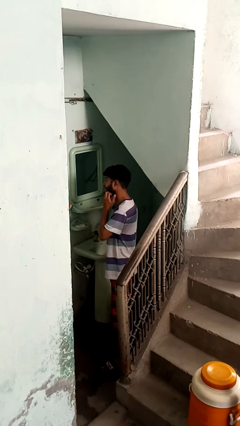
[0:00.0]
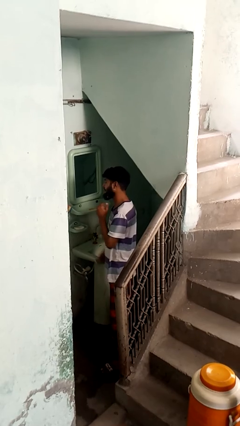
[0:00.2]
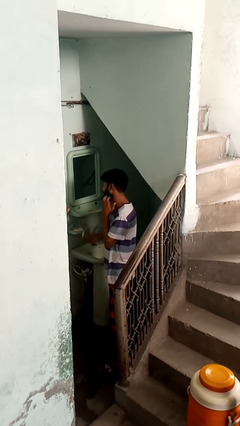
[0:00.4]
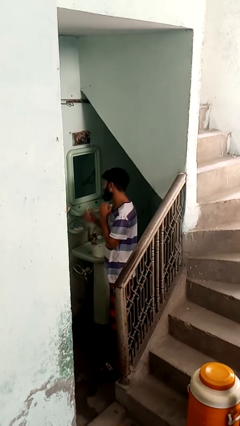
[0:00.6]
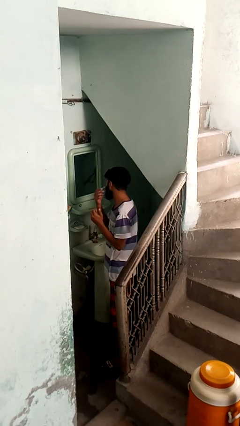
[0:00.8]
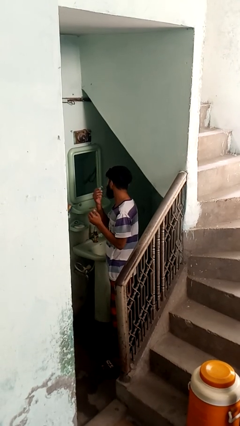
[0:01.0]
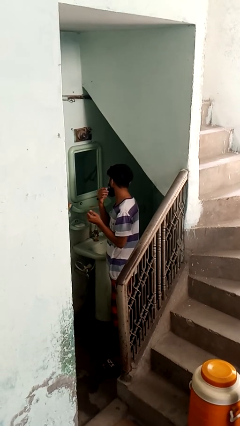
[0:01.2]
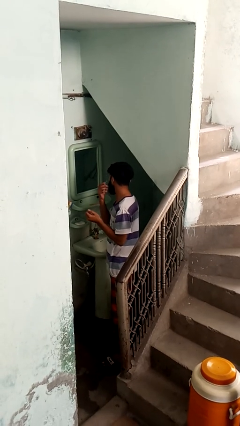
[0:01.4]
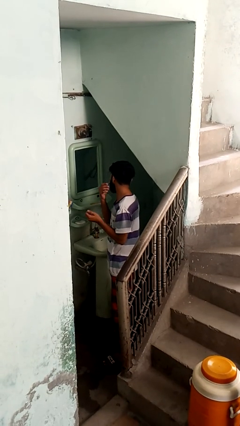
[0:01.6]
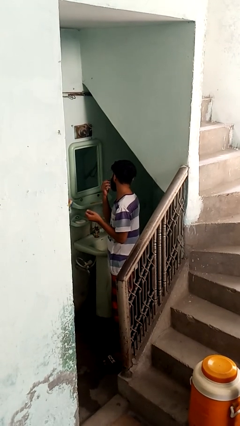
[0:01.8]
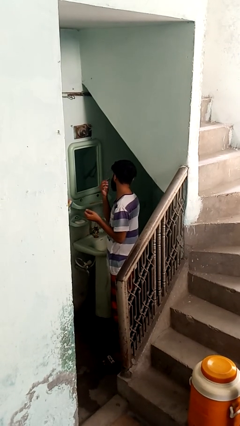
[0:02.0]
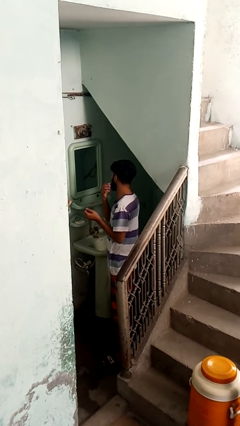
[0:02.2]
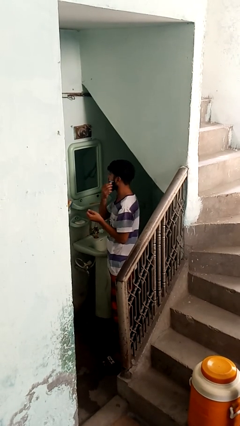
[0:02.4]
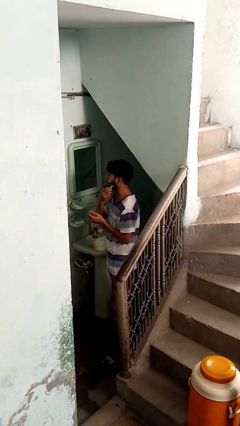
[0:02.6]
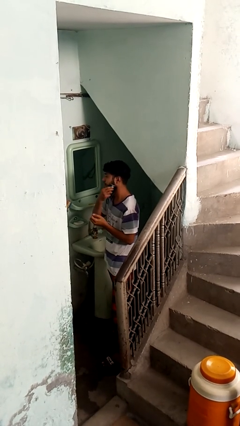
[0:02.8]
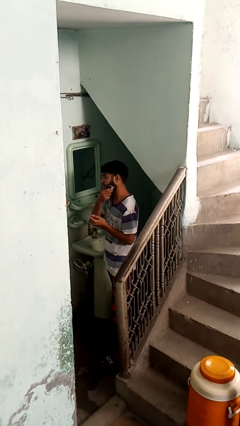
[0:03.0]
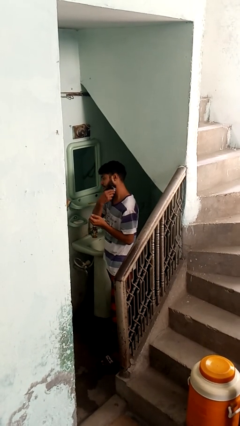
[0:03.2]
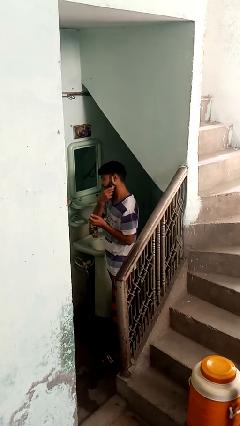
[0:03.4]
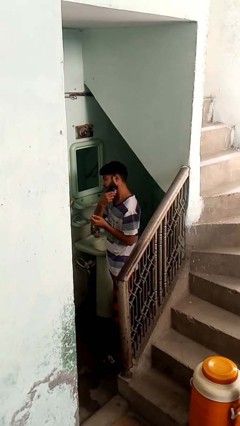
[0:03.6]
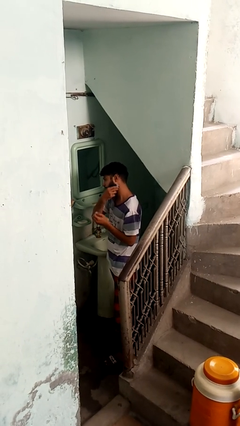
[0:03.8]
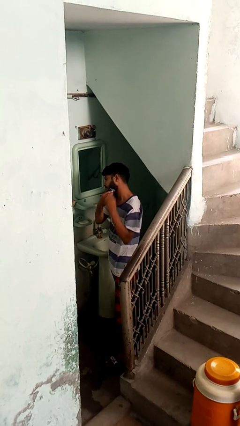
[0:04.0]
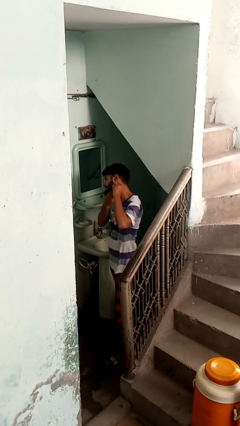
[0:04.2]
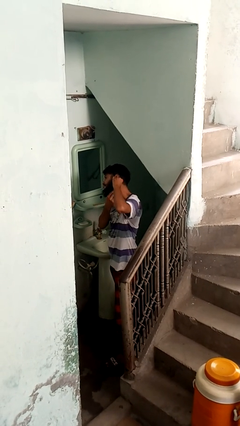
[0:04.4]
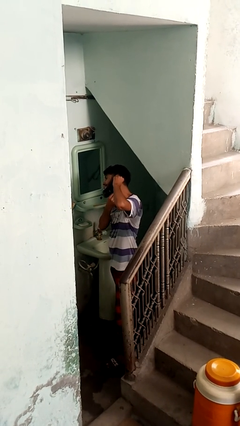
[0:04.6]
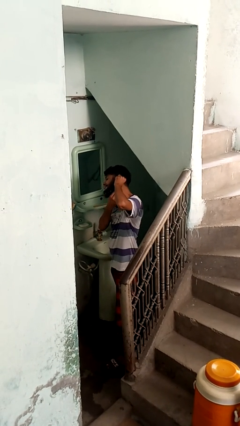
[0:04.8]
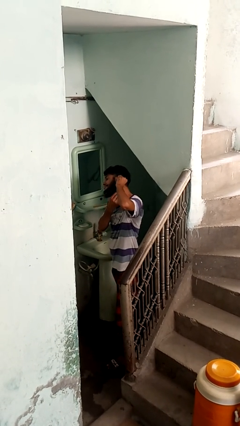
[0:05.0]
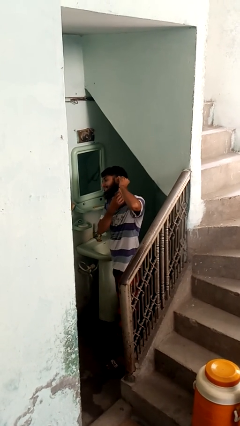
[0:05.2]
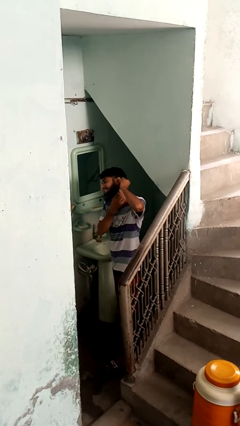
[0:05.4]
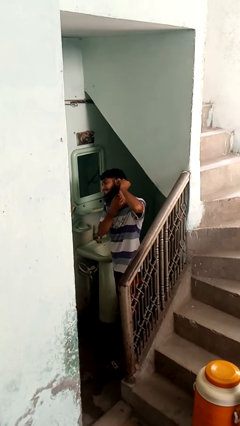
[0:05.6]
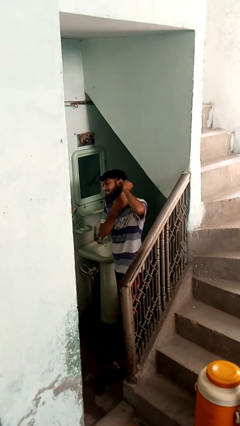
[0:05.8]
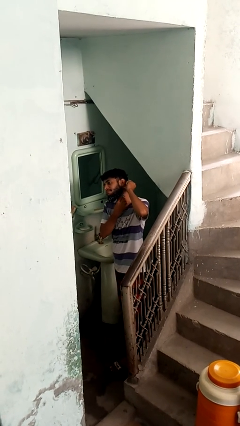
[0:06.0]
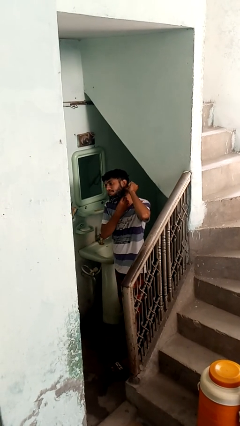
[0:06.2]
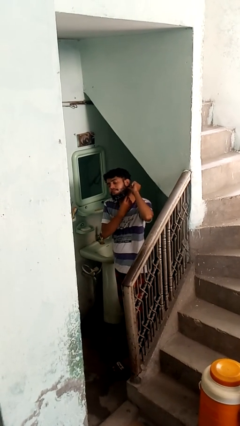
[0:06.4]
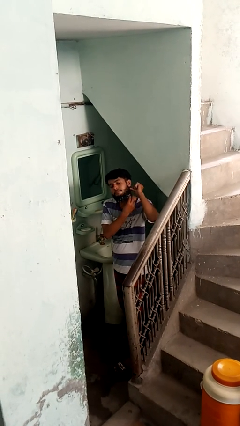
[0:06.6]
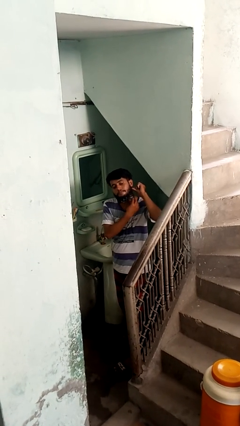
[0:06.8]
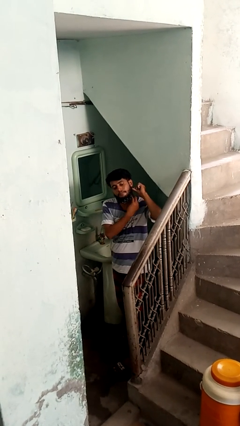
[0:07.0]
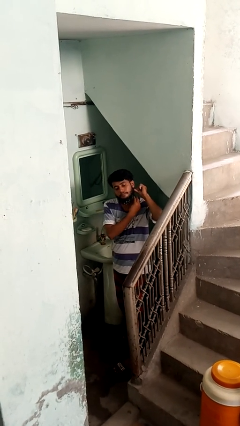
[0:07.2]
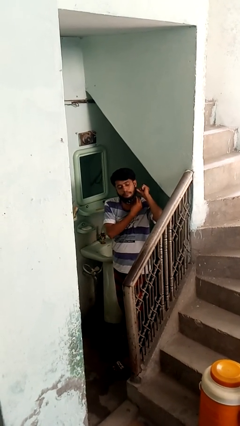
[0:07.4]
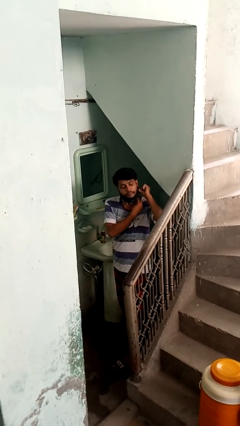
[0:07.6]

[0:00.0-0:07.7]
person shaves face

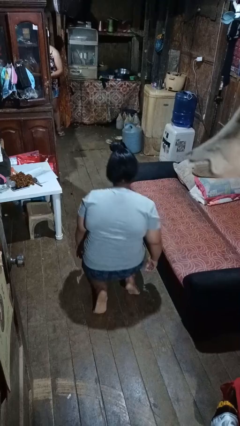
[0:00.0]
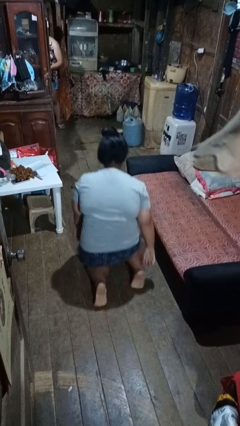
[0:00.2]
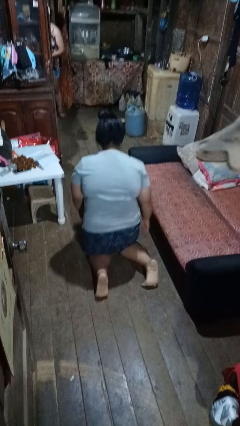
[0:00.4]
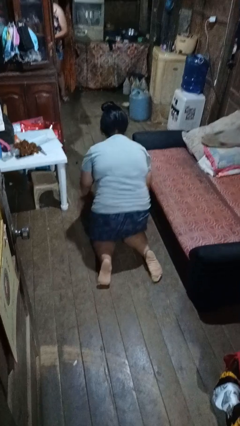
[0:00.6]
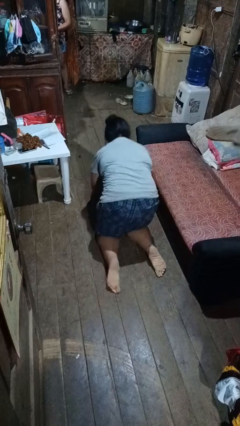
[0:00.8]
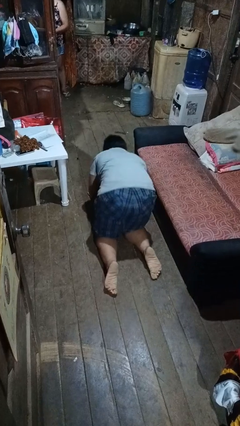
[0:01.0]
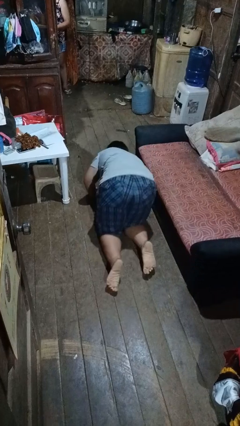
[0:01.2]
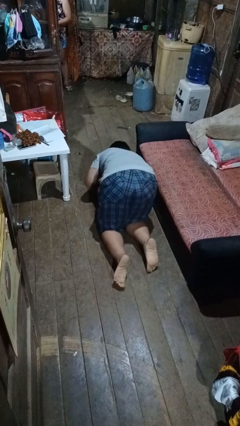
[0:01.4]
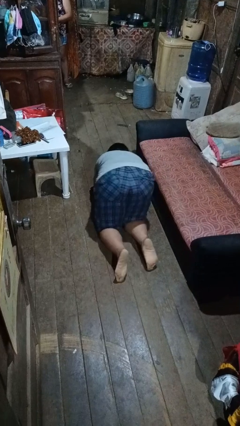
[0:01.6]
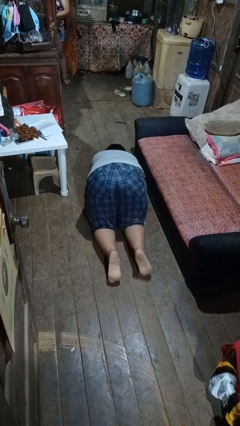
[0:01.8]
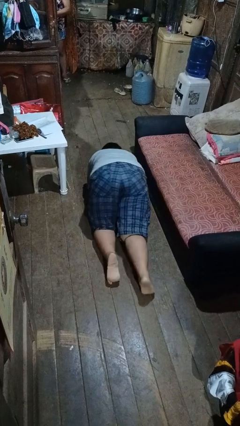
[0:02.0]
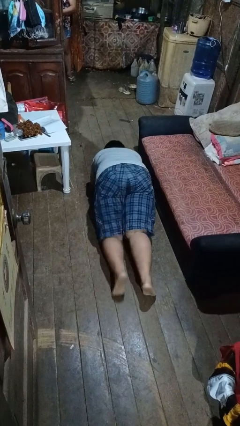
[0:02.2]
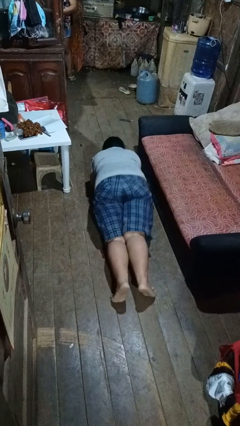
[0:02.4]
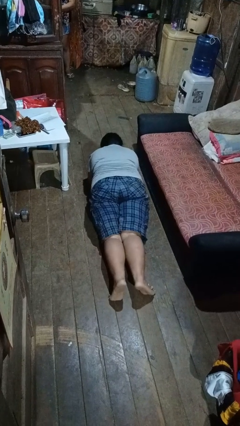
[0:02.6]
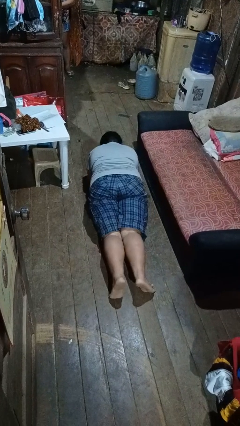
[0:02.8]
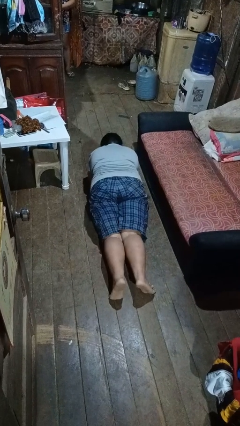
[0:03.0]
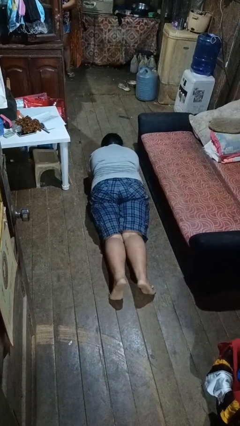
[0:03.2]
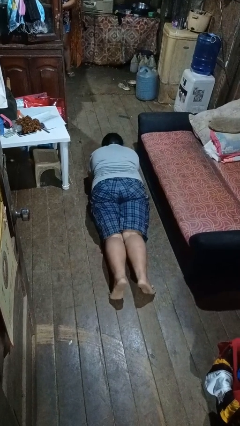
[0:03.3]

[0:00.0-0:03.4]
person exercises with plank

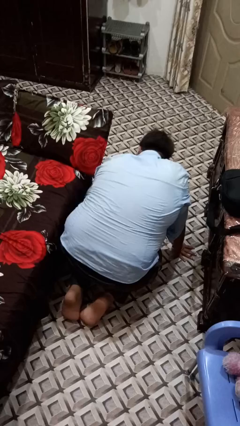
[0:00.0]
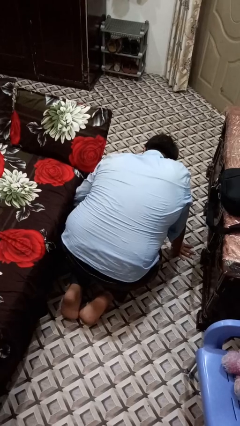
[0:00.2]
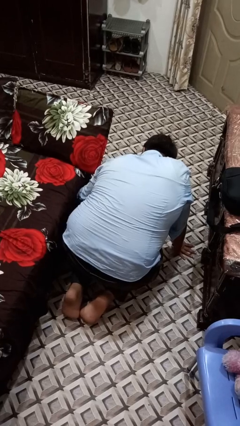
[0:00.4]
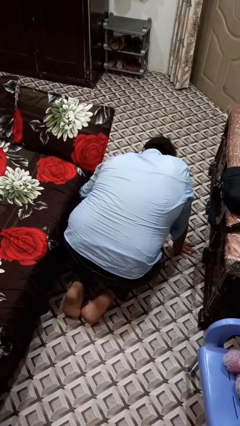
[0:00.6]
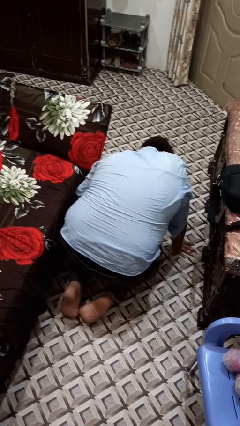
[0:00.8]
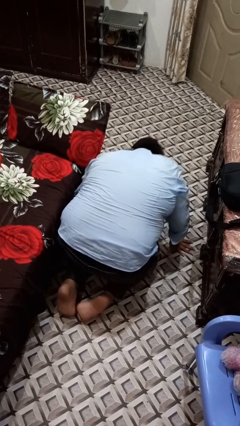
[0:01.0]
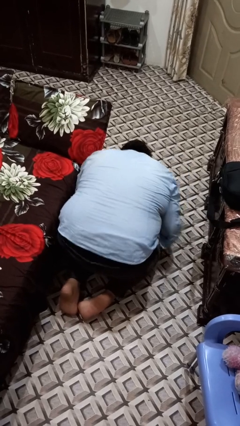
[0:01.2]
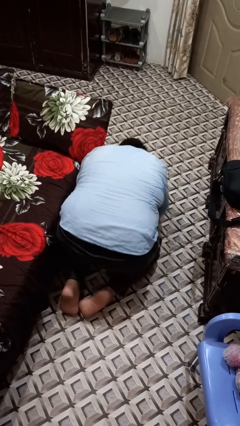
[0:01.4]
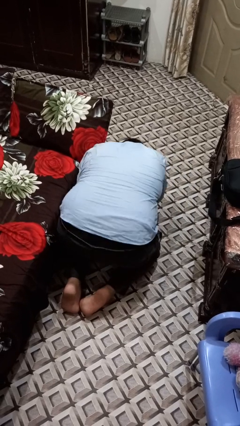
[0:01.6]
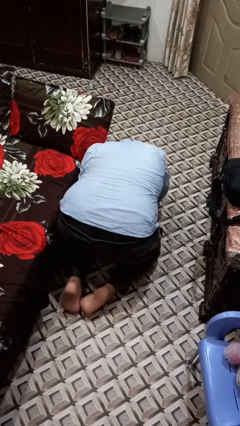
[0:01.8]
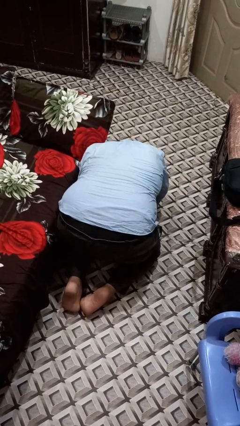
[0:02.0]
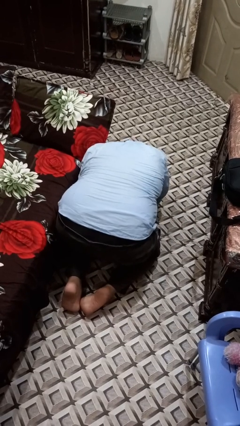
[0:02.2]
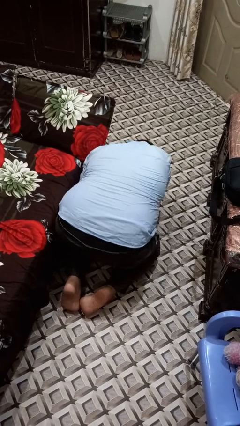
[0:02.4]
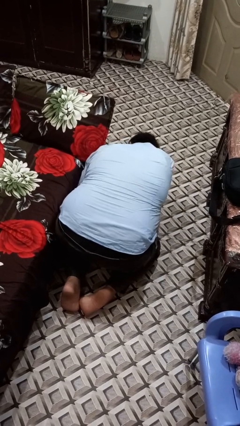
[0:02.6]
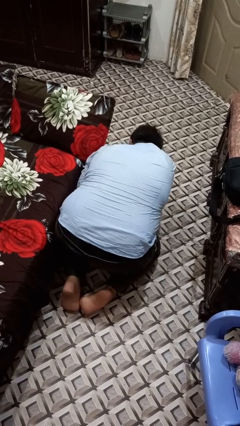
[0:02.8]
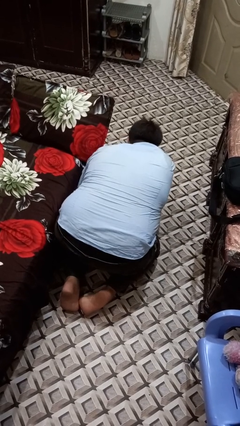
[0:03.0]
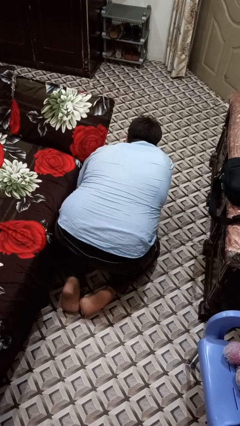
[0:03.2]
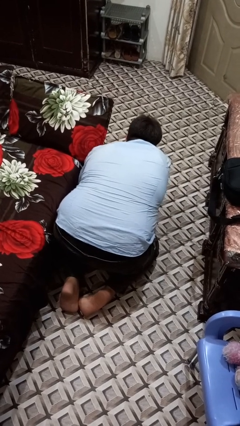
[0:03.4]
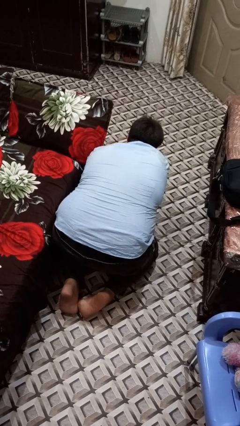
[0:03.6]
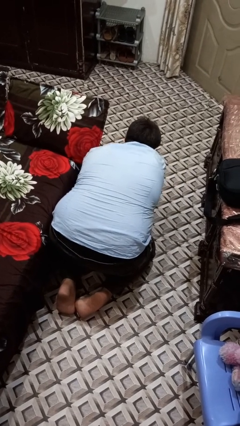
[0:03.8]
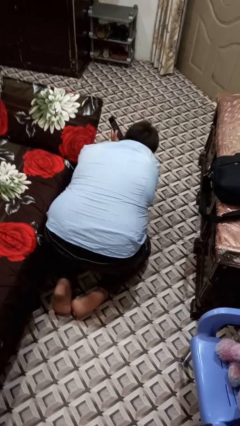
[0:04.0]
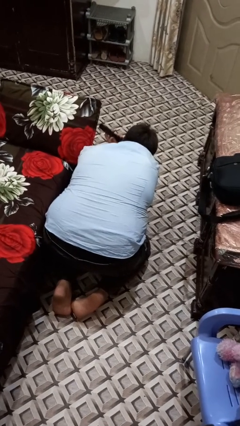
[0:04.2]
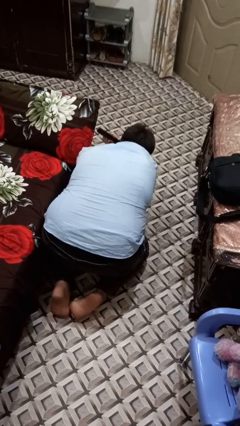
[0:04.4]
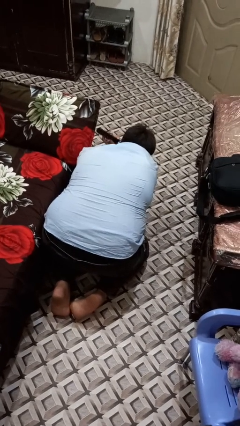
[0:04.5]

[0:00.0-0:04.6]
person searches under couch

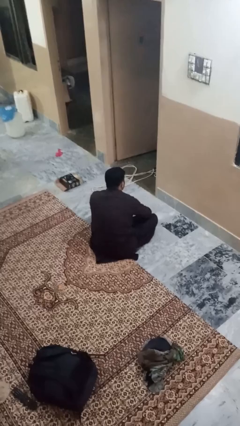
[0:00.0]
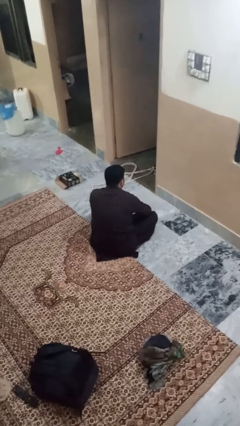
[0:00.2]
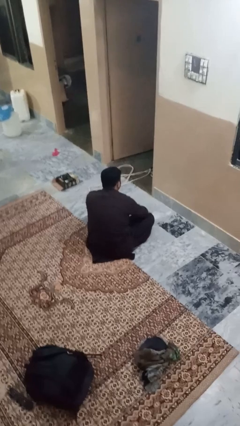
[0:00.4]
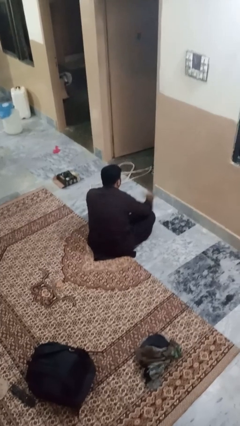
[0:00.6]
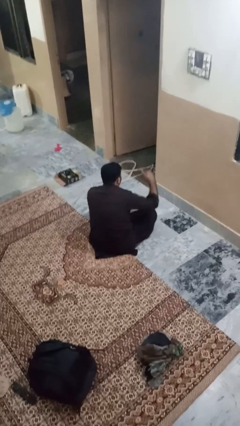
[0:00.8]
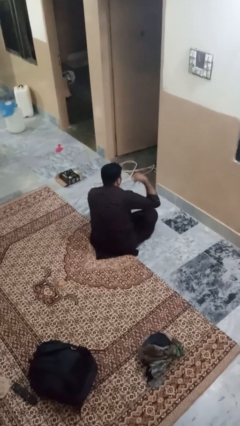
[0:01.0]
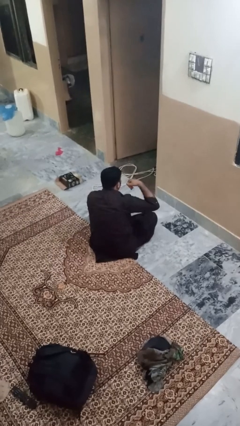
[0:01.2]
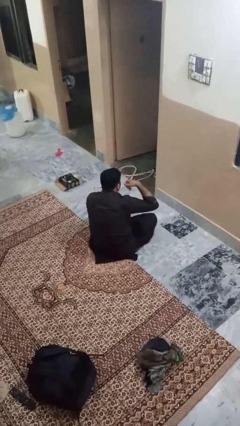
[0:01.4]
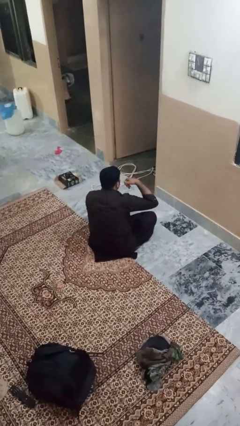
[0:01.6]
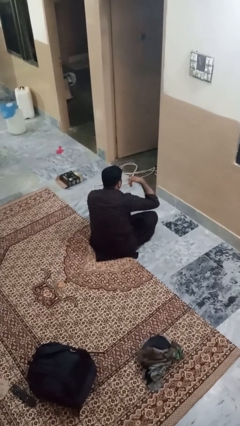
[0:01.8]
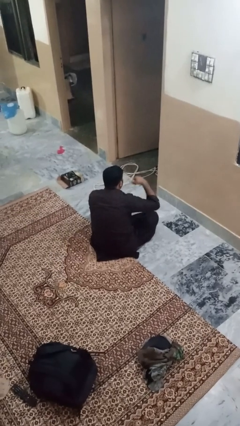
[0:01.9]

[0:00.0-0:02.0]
person gestures call me
